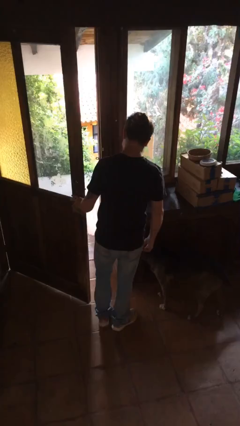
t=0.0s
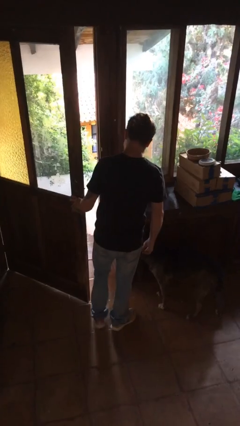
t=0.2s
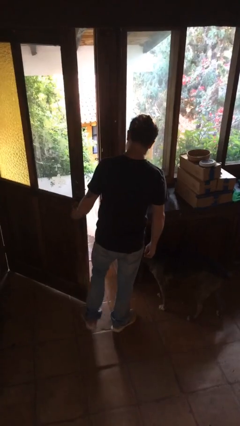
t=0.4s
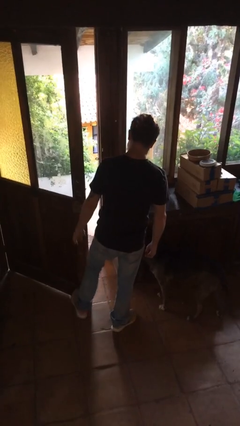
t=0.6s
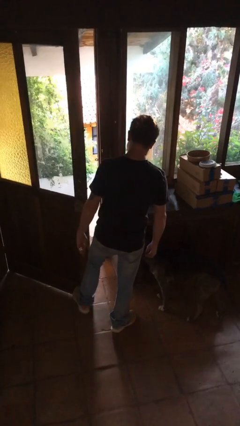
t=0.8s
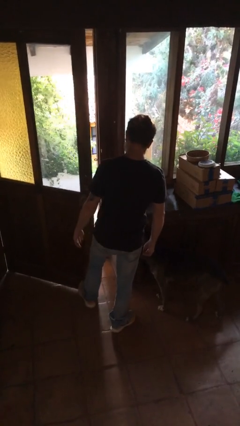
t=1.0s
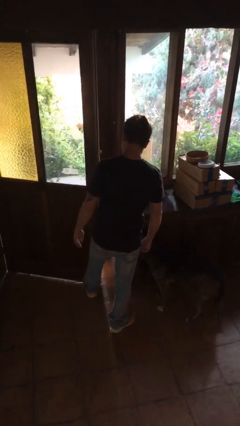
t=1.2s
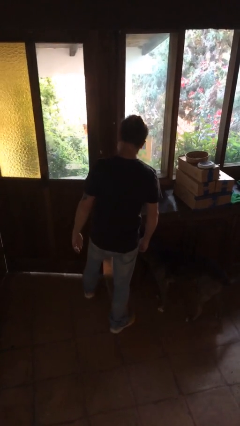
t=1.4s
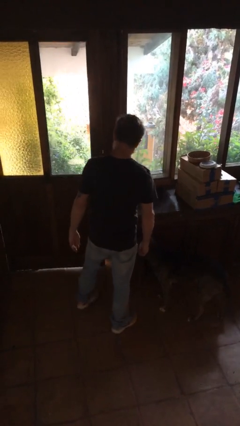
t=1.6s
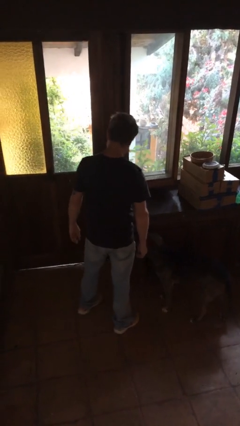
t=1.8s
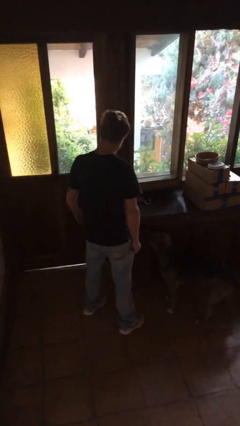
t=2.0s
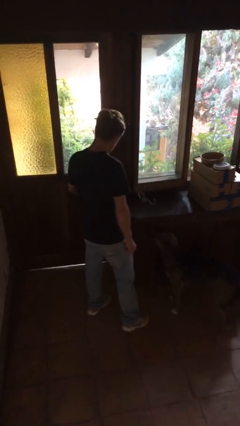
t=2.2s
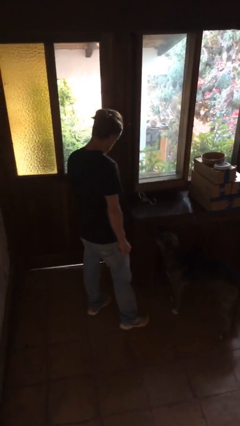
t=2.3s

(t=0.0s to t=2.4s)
person closes door with foot

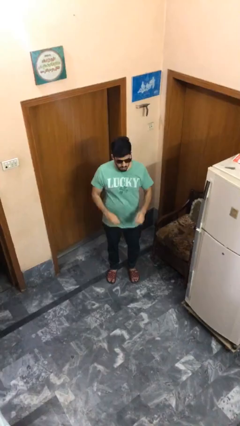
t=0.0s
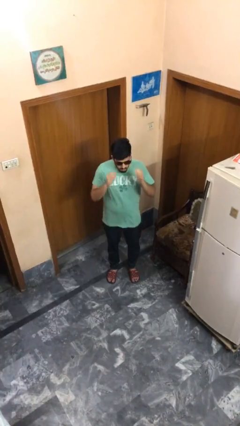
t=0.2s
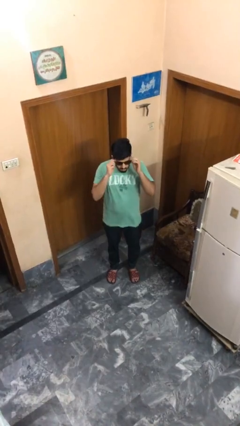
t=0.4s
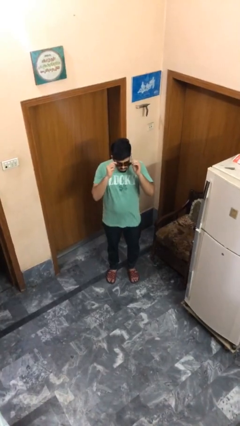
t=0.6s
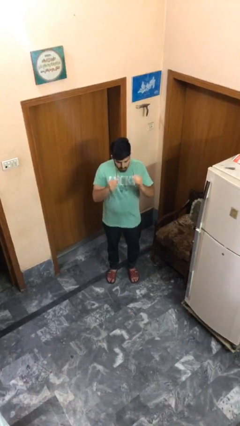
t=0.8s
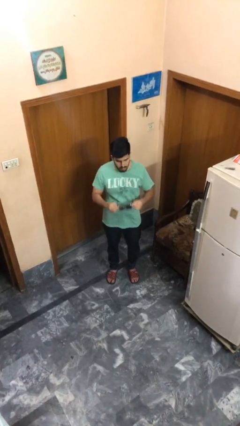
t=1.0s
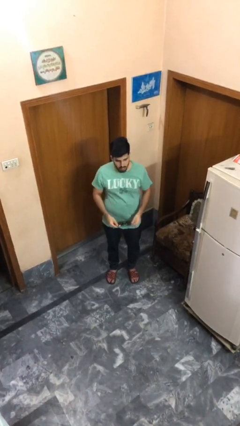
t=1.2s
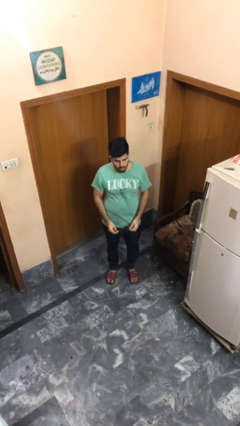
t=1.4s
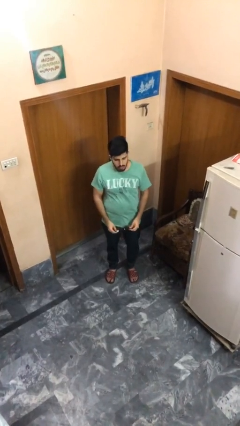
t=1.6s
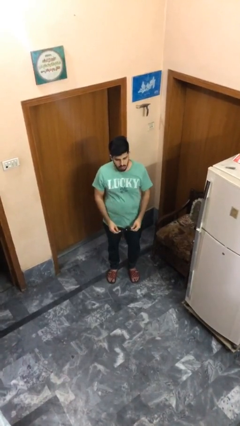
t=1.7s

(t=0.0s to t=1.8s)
person takes off sunglasses

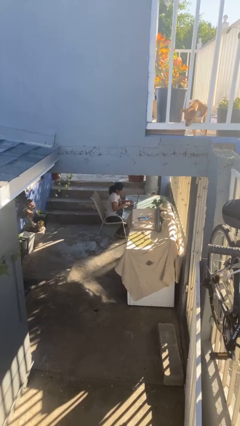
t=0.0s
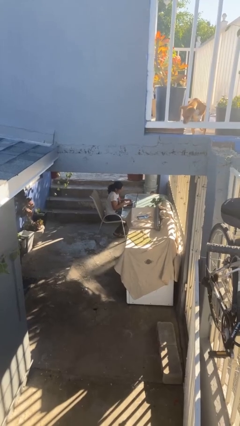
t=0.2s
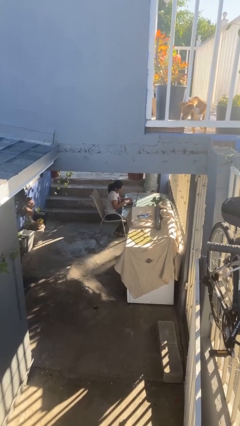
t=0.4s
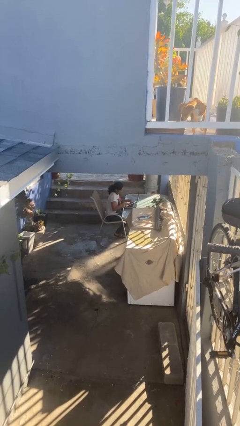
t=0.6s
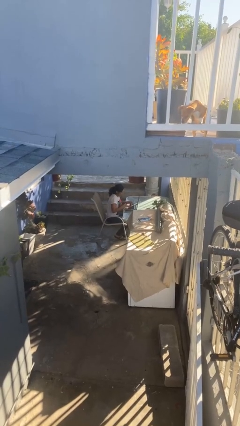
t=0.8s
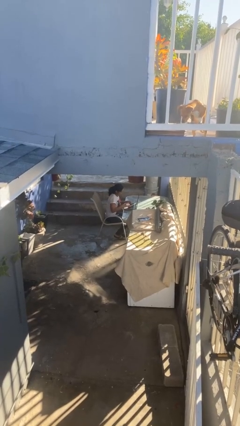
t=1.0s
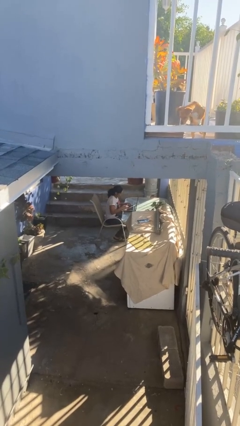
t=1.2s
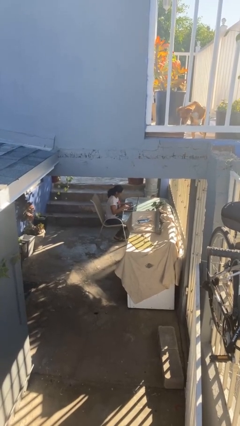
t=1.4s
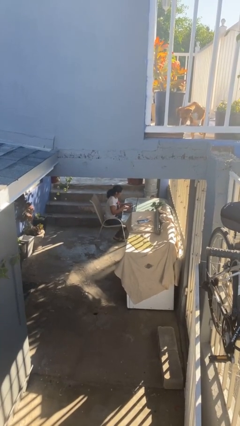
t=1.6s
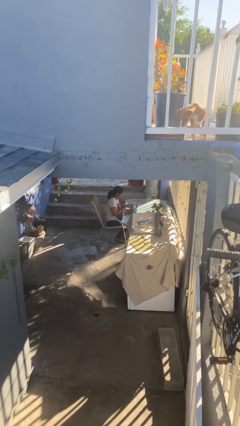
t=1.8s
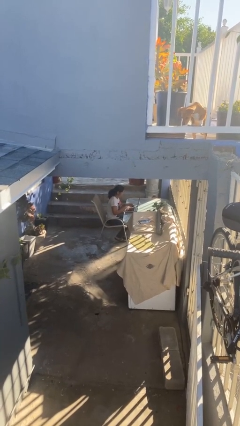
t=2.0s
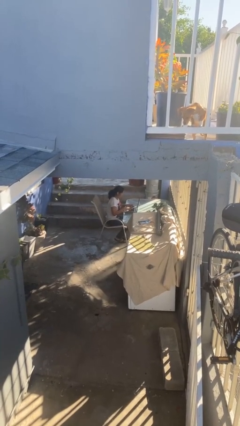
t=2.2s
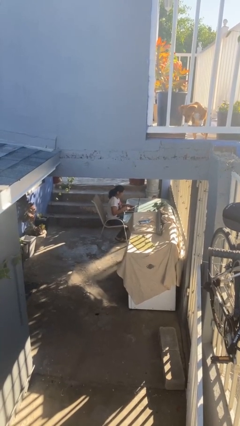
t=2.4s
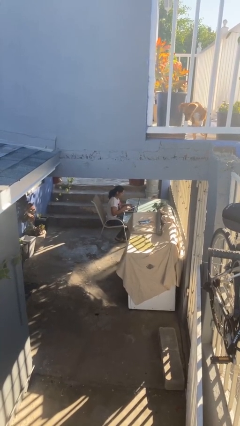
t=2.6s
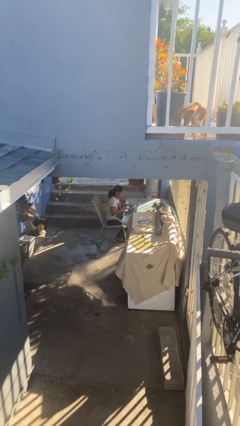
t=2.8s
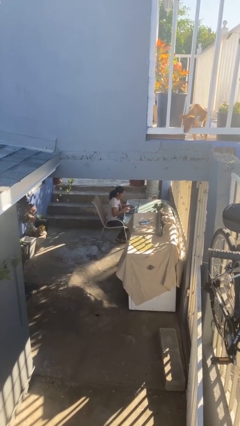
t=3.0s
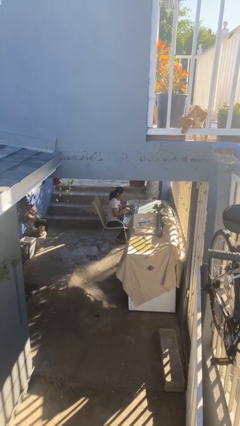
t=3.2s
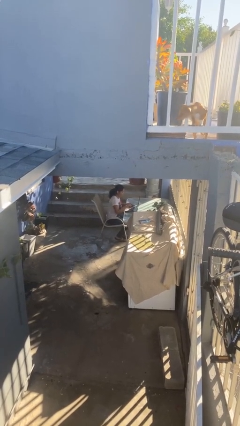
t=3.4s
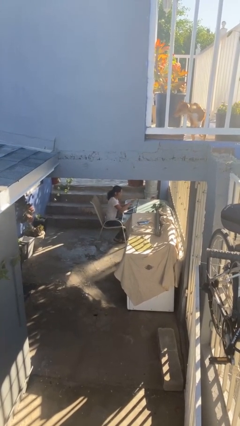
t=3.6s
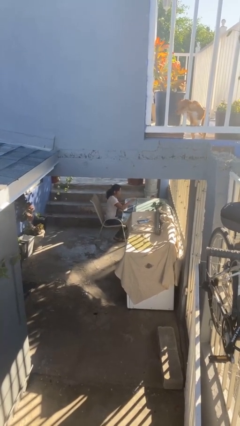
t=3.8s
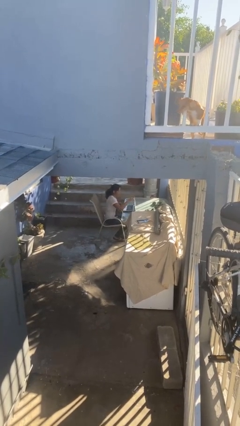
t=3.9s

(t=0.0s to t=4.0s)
person interacts with laptop

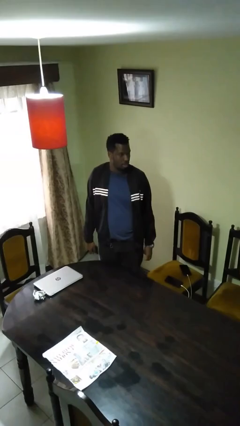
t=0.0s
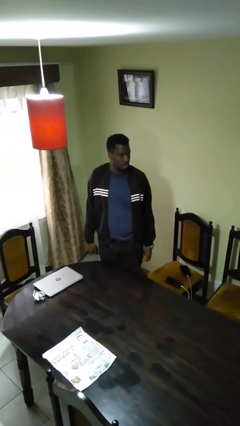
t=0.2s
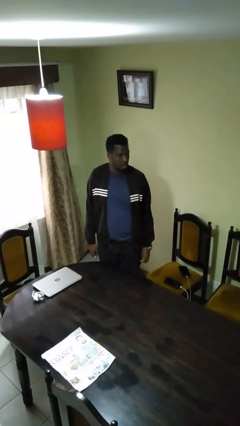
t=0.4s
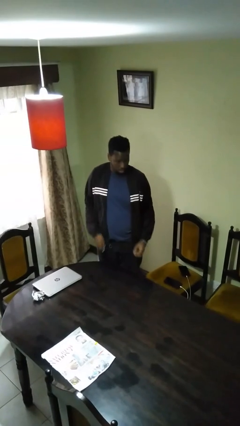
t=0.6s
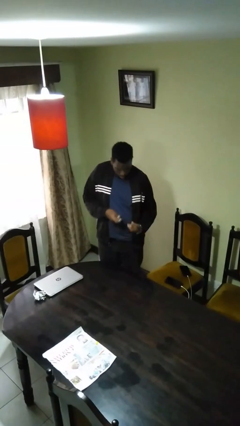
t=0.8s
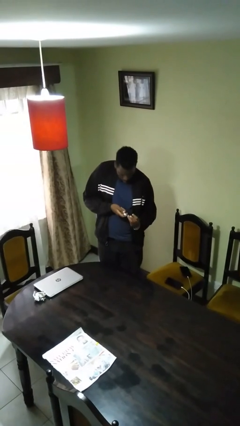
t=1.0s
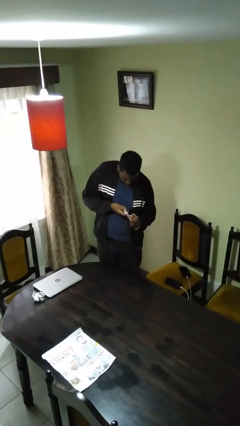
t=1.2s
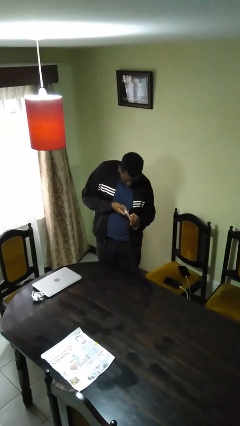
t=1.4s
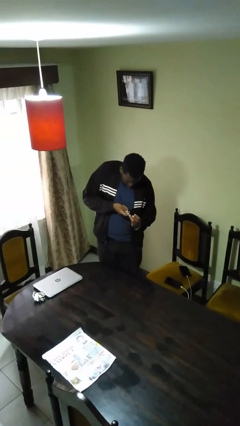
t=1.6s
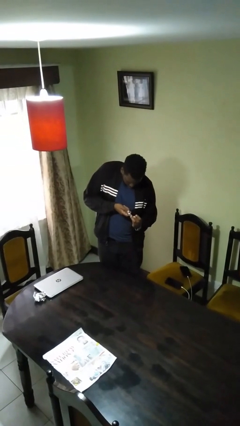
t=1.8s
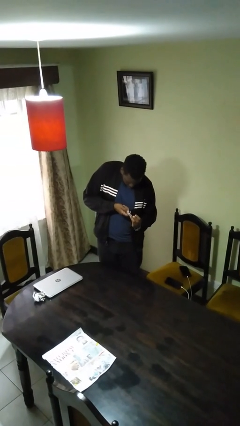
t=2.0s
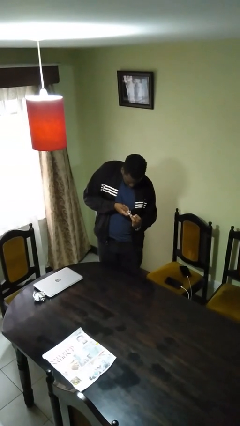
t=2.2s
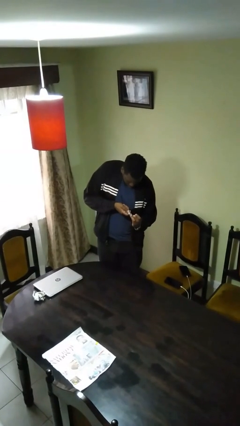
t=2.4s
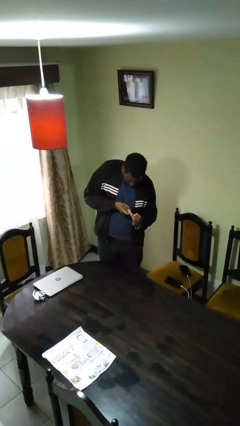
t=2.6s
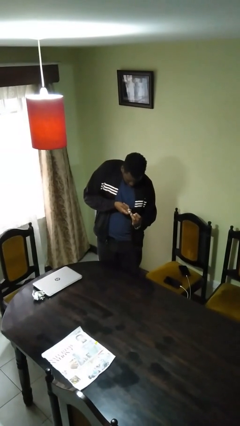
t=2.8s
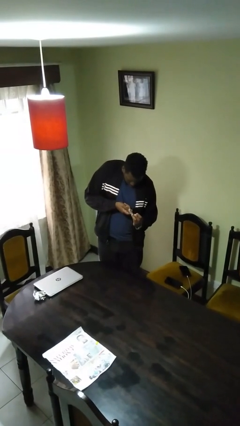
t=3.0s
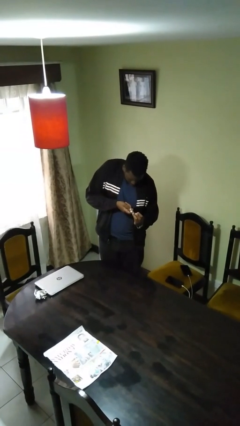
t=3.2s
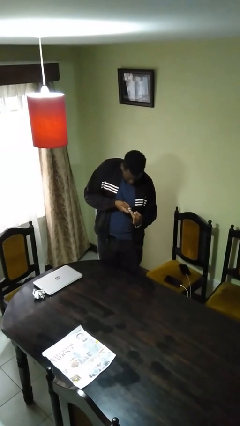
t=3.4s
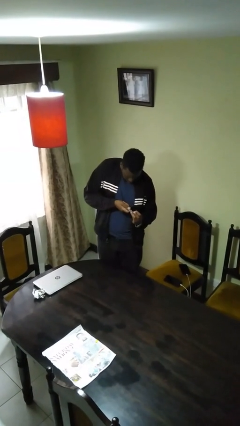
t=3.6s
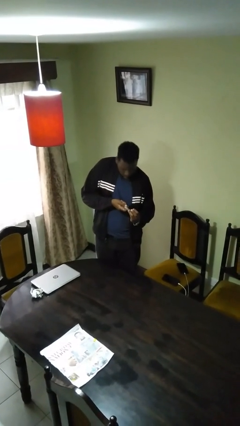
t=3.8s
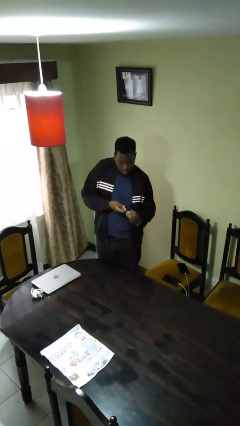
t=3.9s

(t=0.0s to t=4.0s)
person clips fingernails

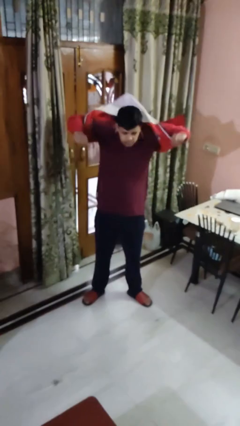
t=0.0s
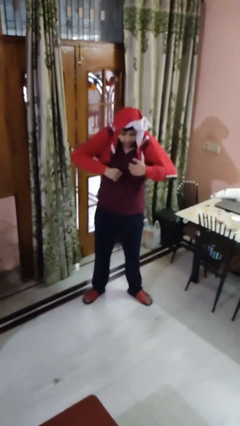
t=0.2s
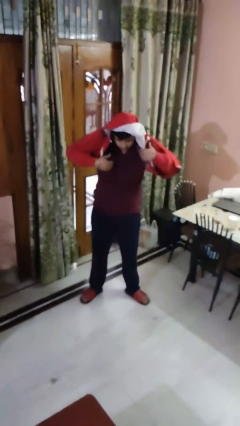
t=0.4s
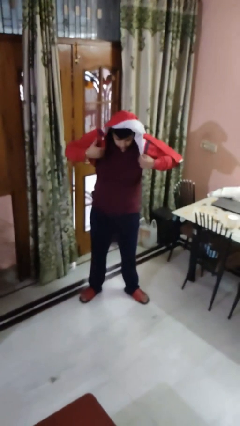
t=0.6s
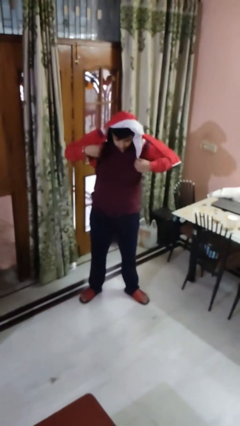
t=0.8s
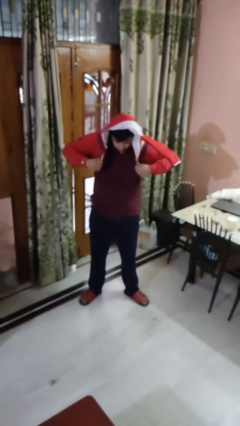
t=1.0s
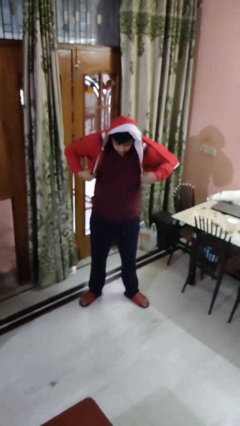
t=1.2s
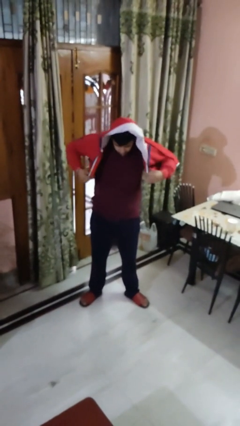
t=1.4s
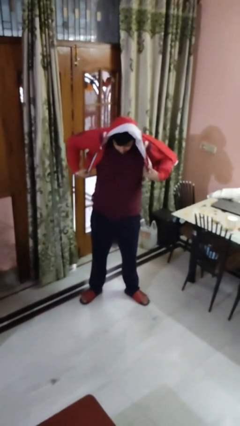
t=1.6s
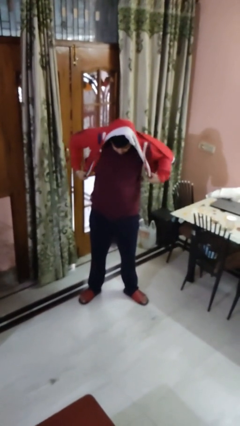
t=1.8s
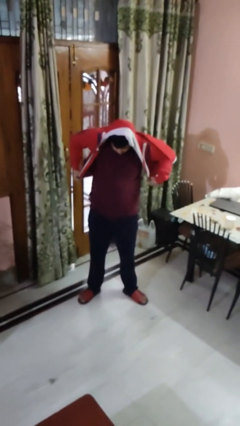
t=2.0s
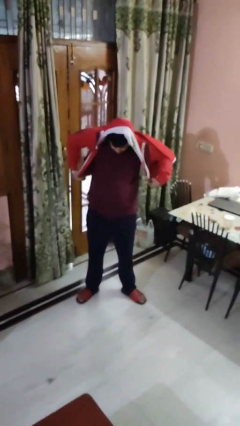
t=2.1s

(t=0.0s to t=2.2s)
person puts on hoodie

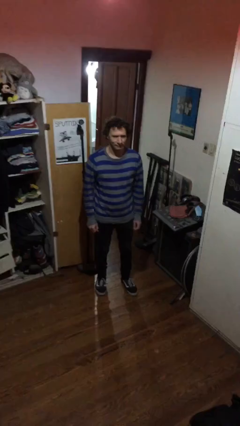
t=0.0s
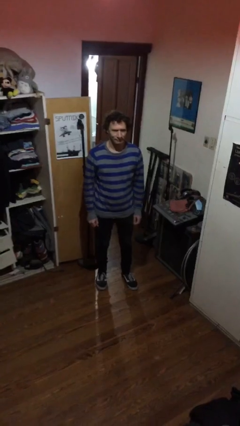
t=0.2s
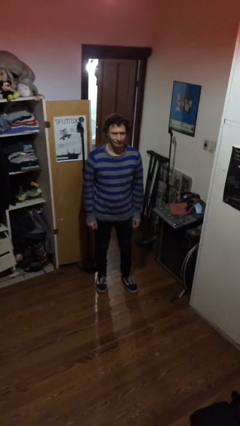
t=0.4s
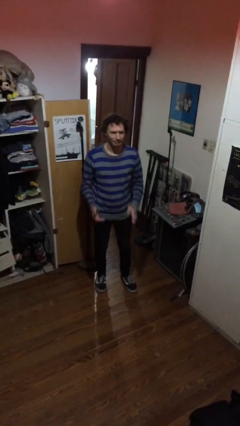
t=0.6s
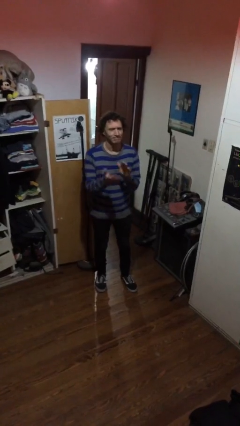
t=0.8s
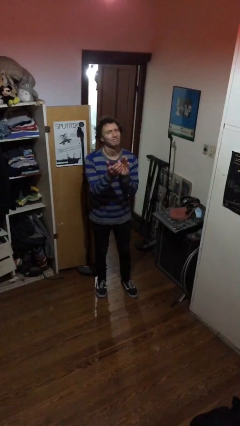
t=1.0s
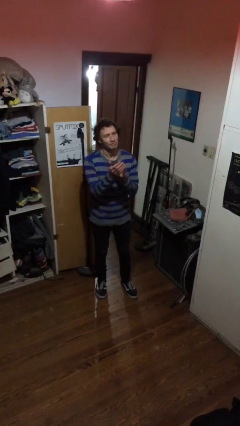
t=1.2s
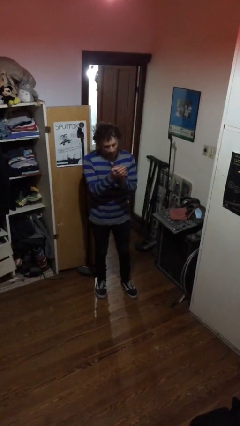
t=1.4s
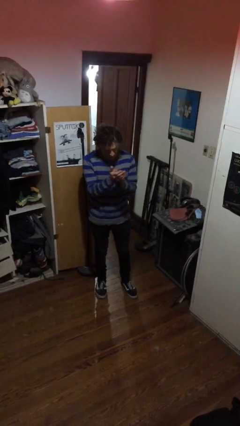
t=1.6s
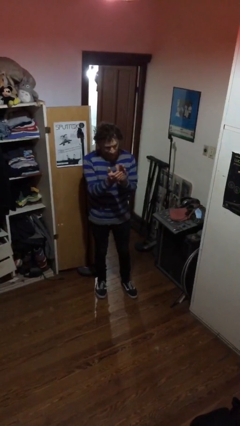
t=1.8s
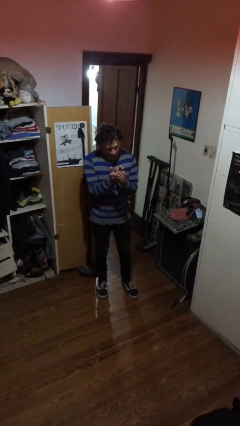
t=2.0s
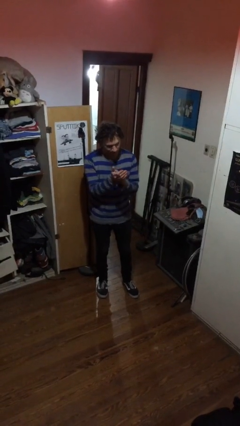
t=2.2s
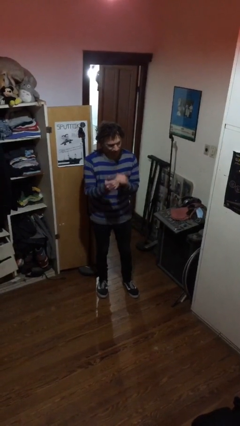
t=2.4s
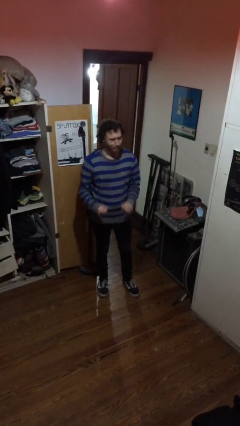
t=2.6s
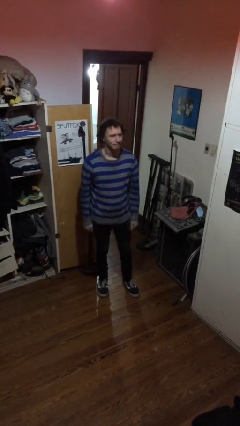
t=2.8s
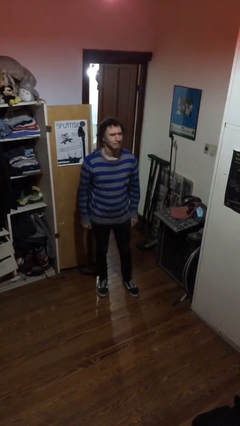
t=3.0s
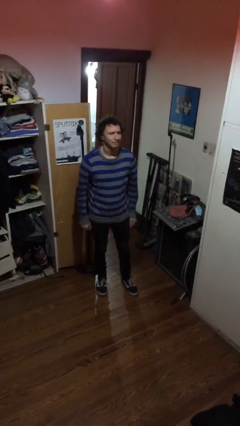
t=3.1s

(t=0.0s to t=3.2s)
person claps hands
